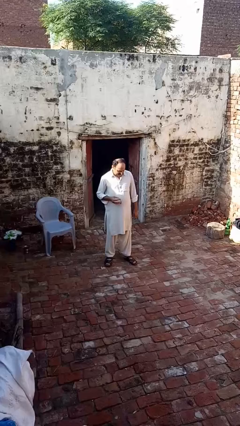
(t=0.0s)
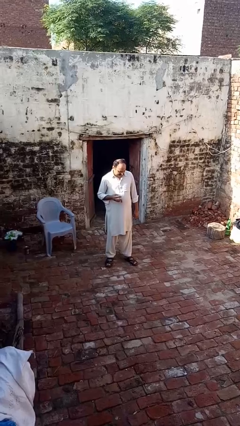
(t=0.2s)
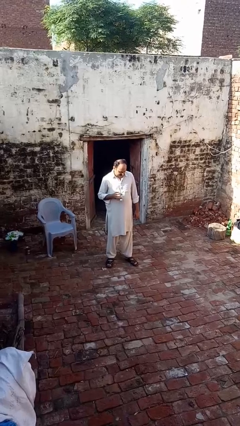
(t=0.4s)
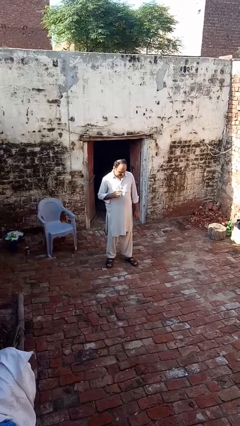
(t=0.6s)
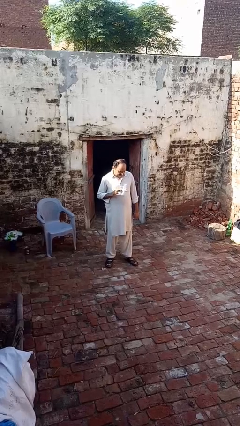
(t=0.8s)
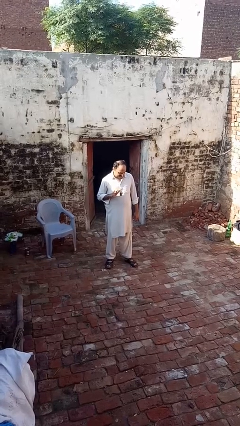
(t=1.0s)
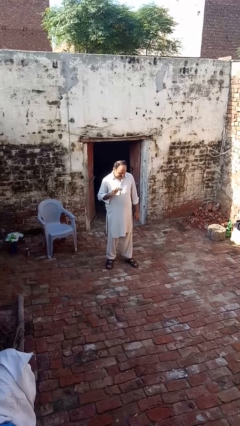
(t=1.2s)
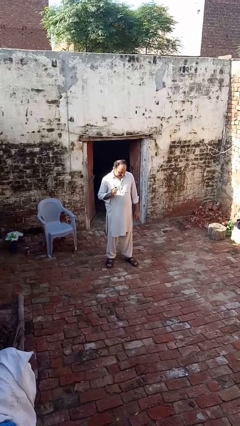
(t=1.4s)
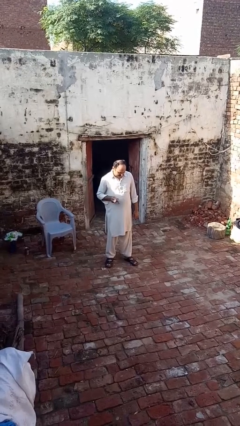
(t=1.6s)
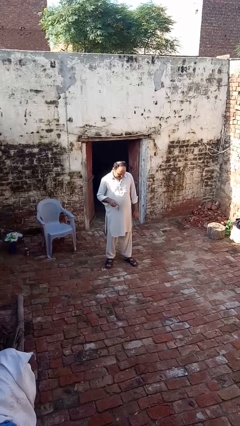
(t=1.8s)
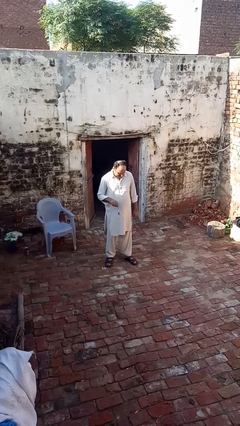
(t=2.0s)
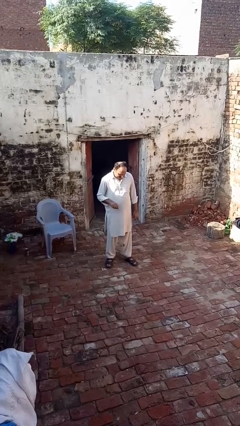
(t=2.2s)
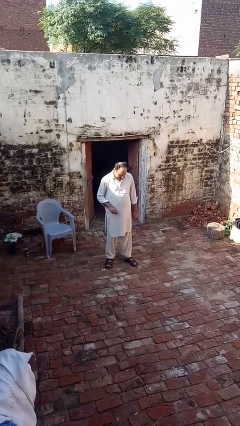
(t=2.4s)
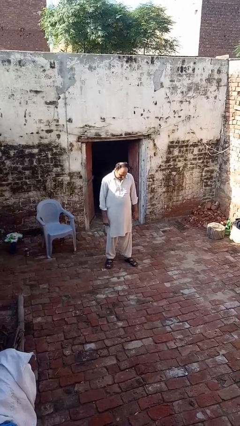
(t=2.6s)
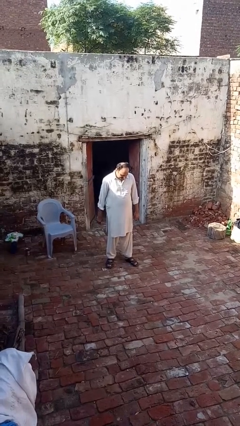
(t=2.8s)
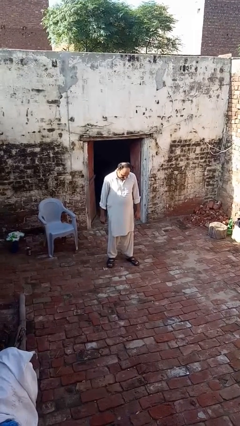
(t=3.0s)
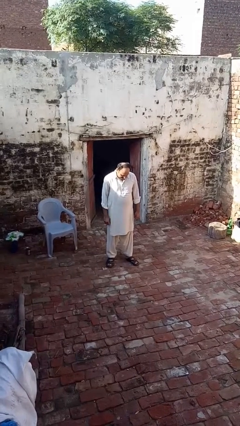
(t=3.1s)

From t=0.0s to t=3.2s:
person drops object

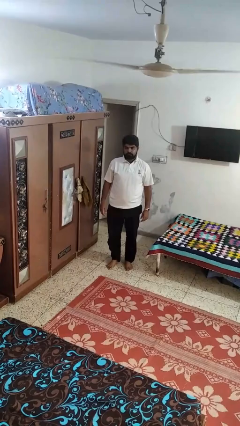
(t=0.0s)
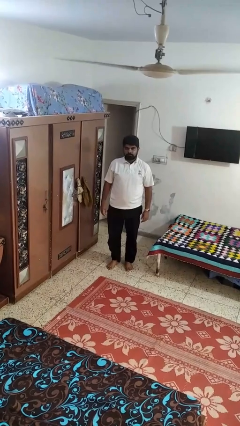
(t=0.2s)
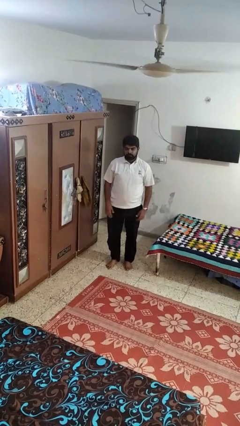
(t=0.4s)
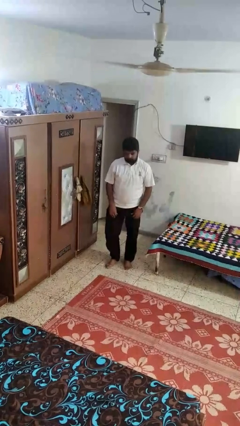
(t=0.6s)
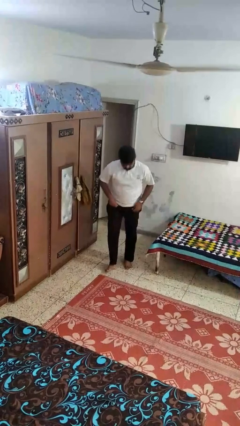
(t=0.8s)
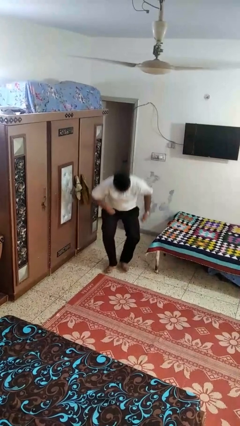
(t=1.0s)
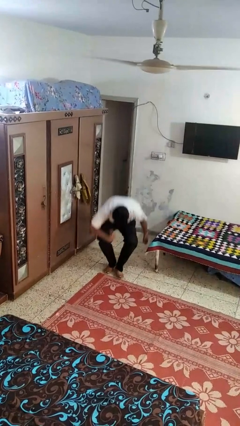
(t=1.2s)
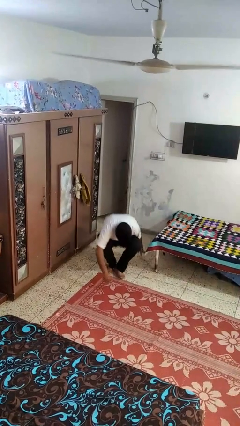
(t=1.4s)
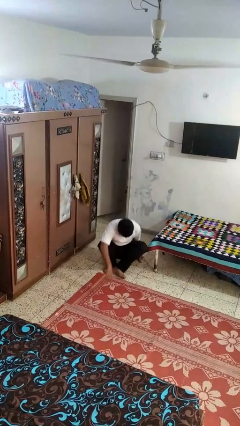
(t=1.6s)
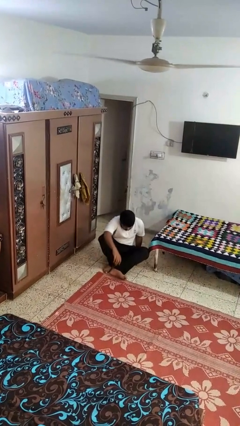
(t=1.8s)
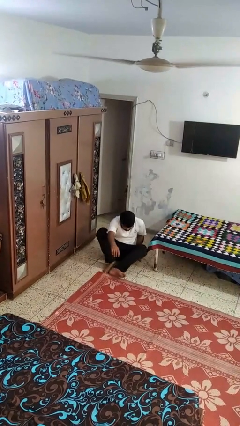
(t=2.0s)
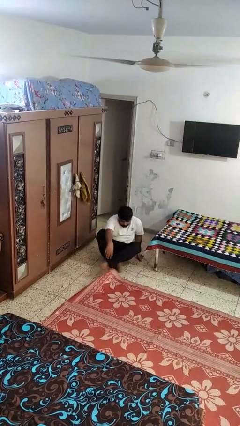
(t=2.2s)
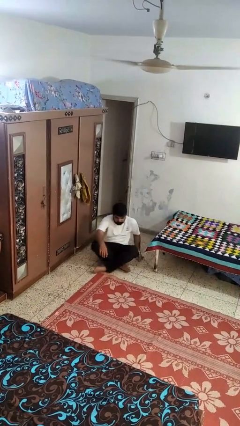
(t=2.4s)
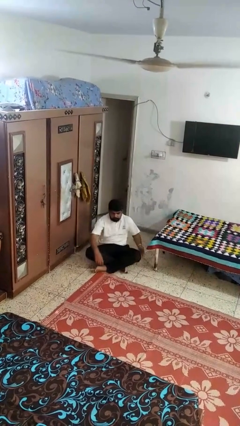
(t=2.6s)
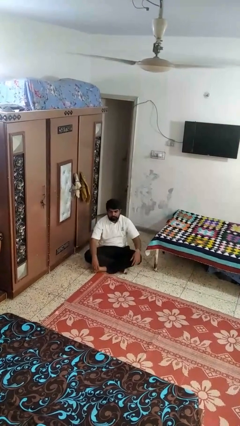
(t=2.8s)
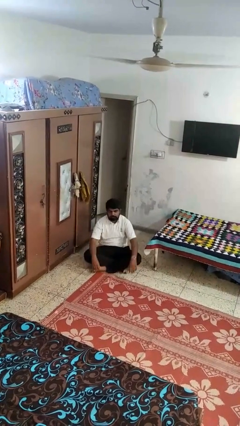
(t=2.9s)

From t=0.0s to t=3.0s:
person sits crisscross

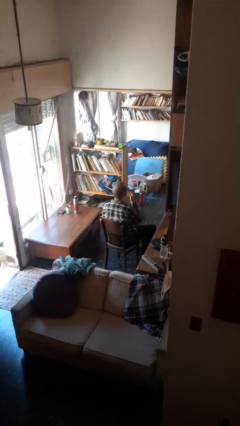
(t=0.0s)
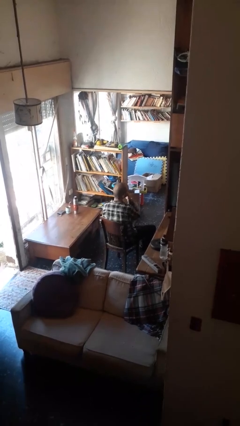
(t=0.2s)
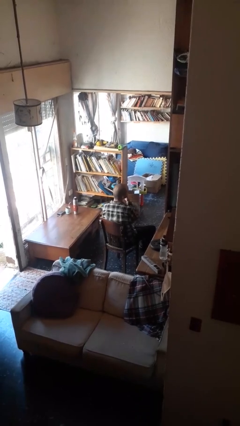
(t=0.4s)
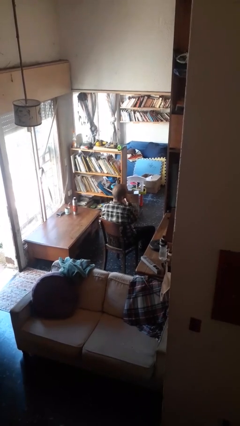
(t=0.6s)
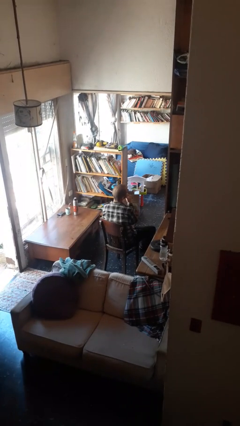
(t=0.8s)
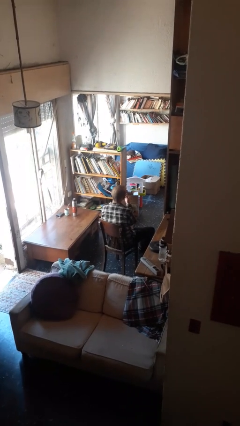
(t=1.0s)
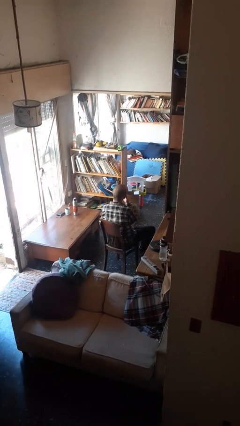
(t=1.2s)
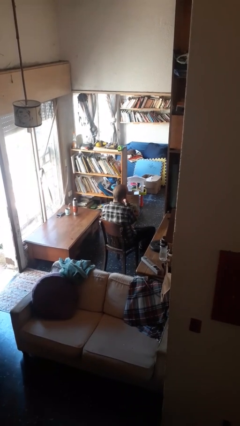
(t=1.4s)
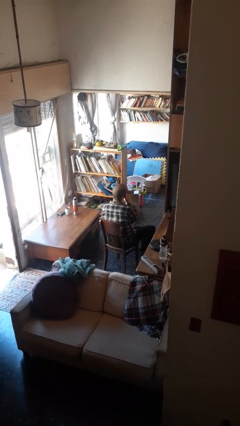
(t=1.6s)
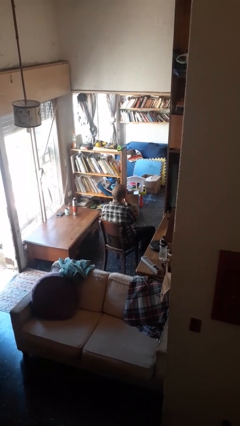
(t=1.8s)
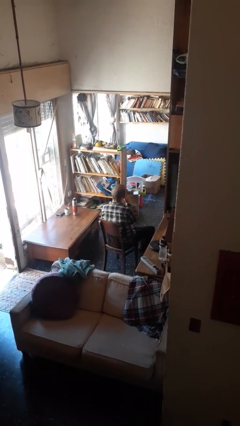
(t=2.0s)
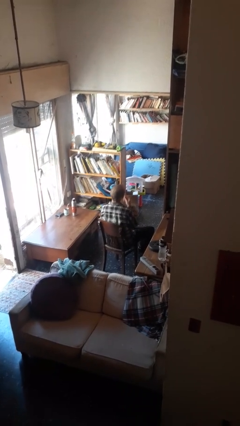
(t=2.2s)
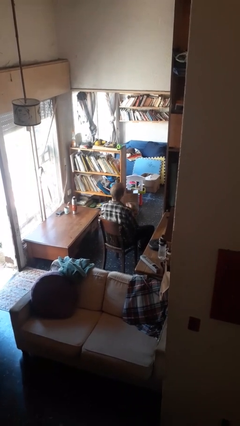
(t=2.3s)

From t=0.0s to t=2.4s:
person strokes chin

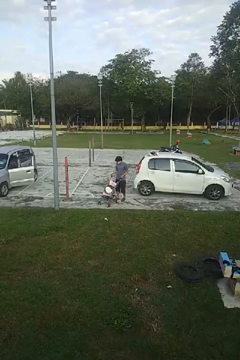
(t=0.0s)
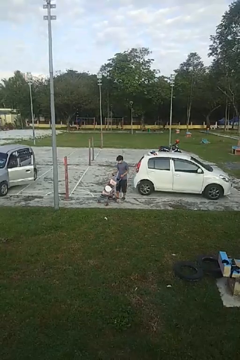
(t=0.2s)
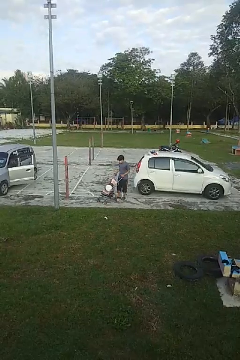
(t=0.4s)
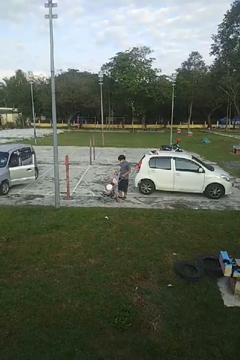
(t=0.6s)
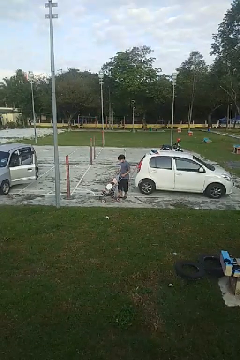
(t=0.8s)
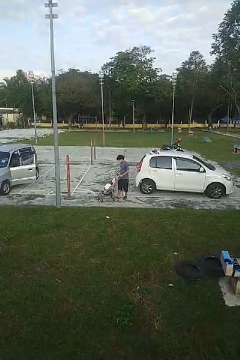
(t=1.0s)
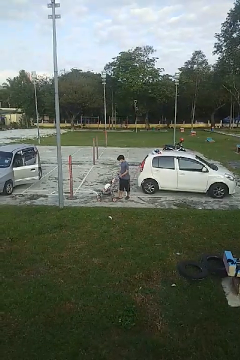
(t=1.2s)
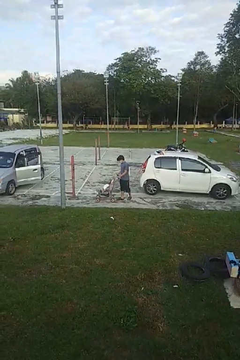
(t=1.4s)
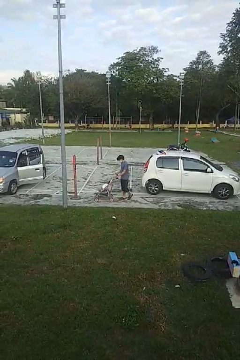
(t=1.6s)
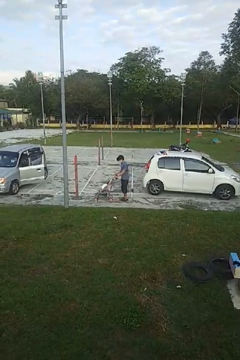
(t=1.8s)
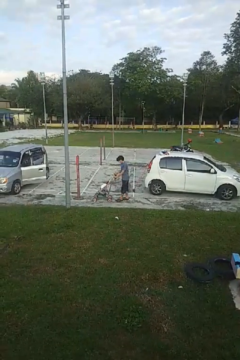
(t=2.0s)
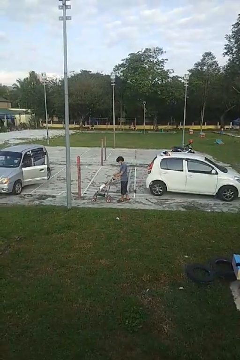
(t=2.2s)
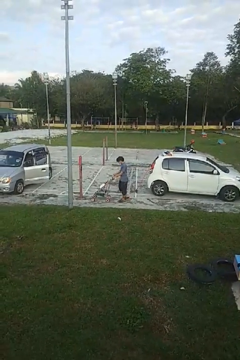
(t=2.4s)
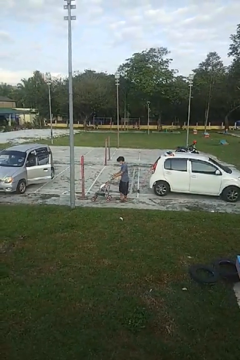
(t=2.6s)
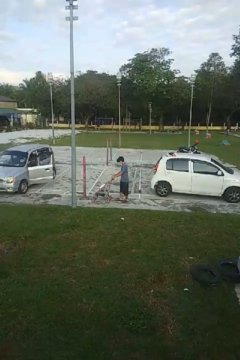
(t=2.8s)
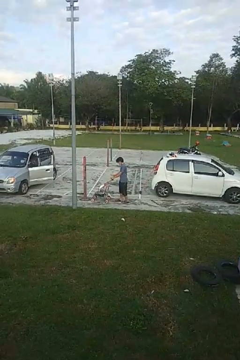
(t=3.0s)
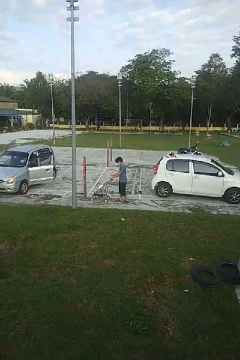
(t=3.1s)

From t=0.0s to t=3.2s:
person pushes wheeled cart

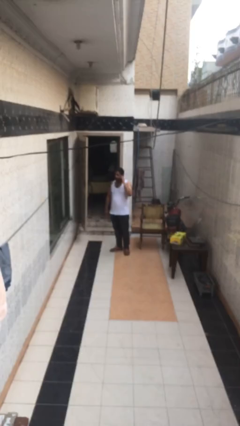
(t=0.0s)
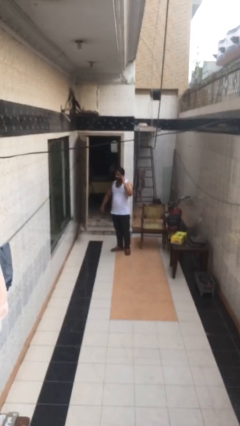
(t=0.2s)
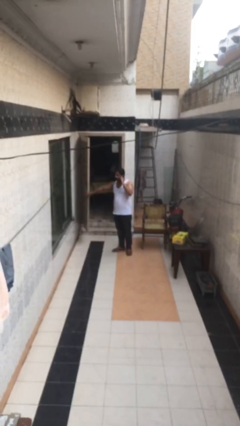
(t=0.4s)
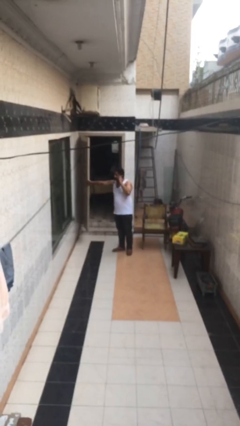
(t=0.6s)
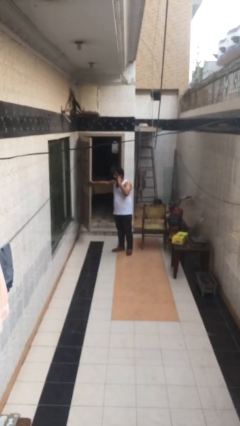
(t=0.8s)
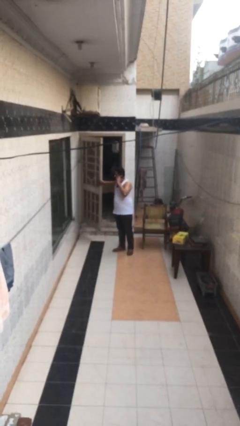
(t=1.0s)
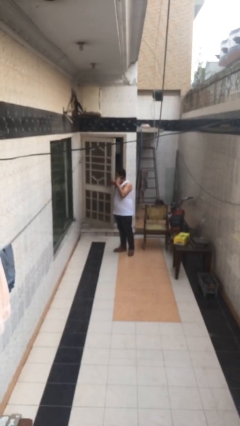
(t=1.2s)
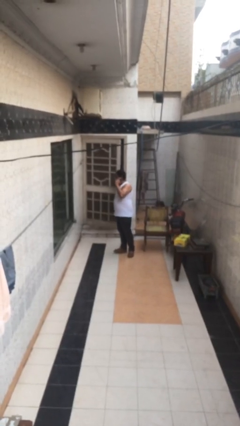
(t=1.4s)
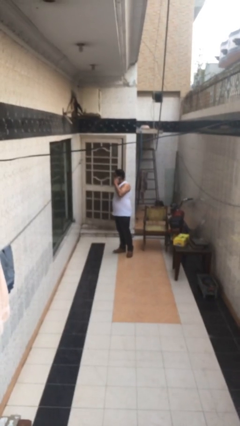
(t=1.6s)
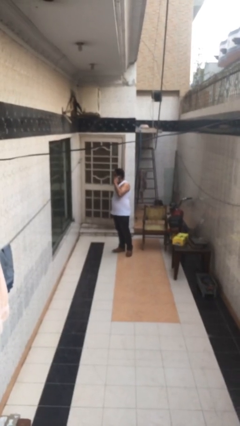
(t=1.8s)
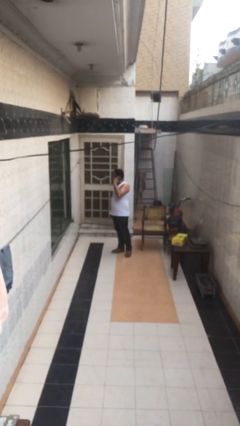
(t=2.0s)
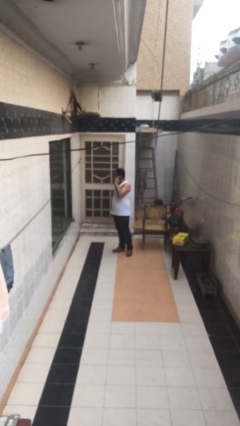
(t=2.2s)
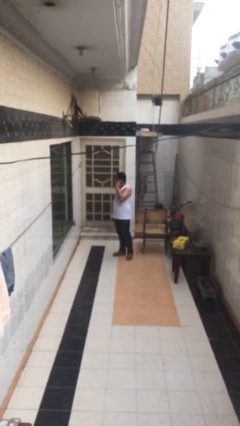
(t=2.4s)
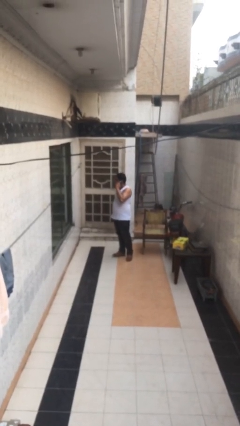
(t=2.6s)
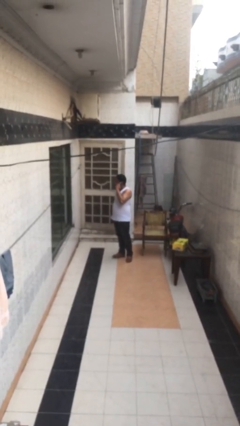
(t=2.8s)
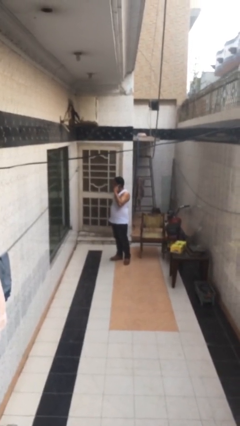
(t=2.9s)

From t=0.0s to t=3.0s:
person closes facility door

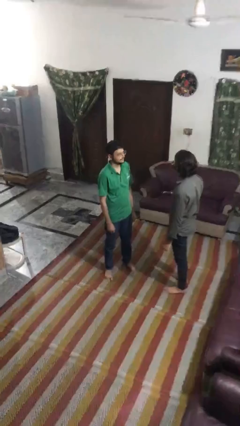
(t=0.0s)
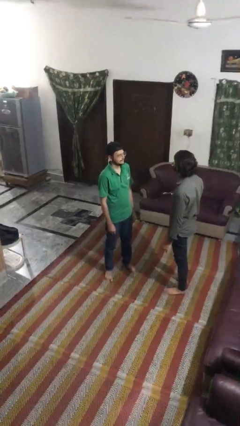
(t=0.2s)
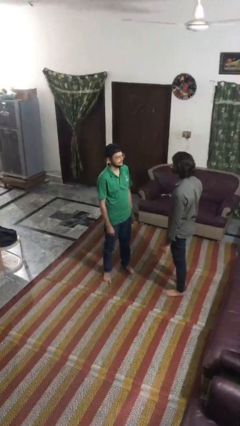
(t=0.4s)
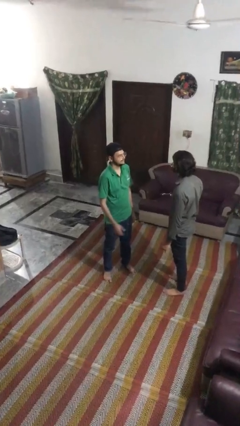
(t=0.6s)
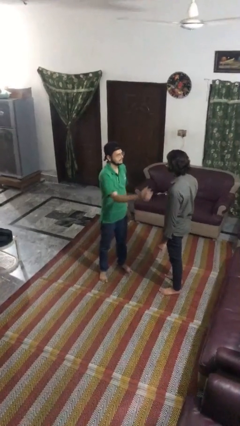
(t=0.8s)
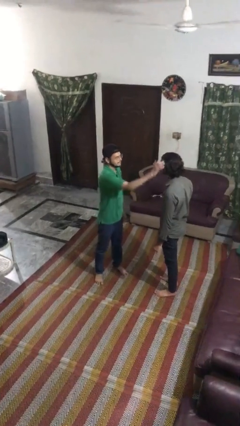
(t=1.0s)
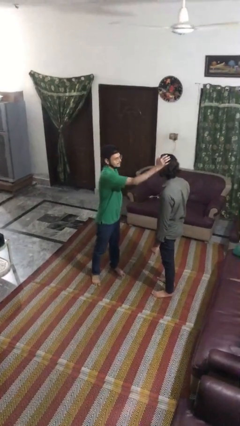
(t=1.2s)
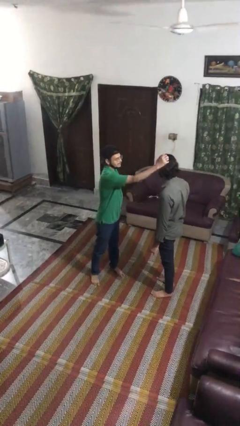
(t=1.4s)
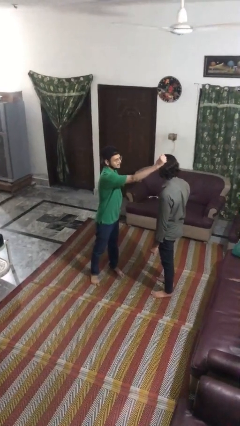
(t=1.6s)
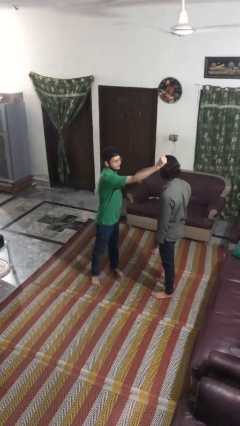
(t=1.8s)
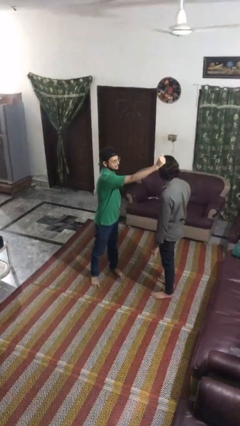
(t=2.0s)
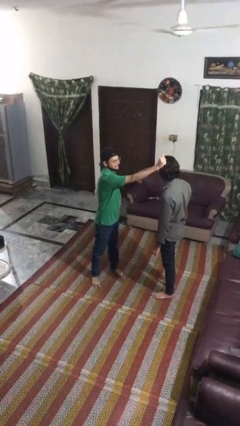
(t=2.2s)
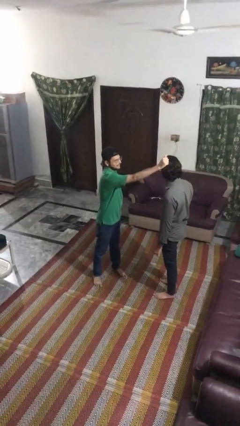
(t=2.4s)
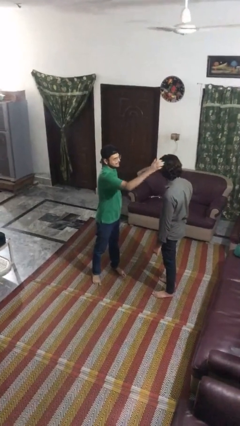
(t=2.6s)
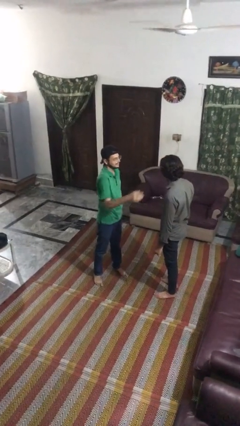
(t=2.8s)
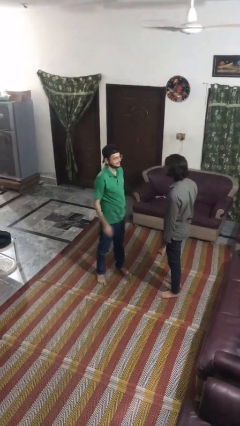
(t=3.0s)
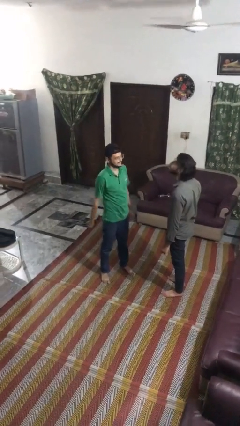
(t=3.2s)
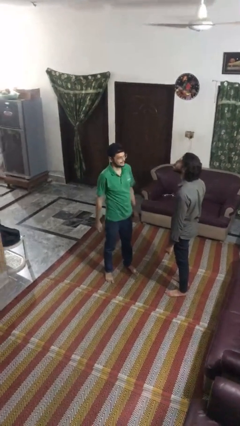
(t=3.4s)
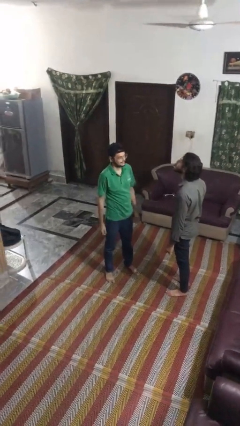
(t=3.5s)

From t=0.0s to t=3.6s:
person grabs person by hair
